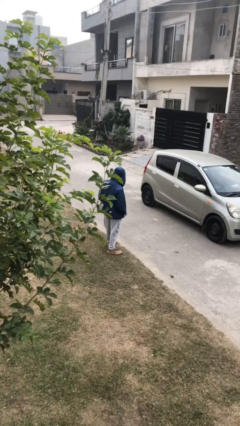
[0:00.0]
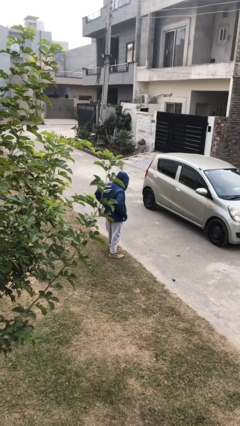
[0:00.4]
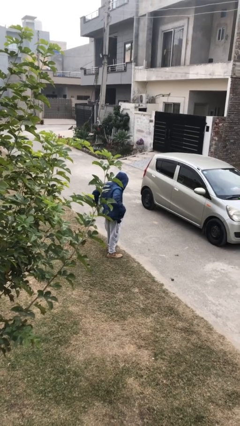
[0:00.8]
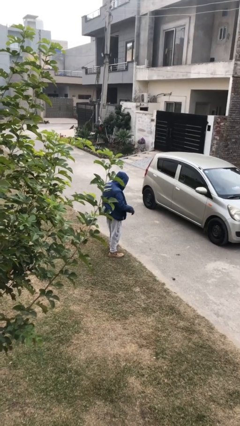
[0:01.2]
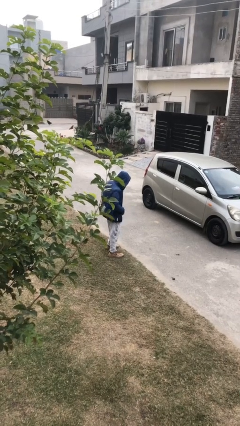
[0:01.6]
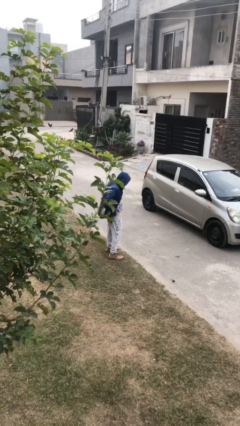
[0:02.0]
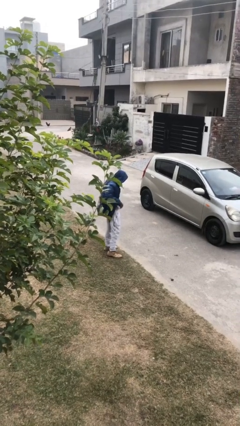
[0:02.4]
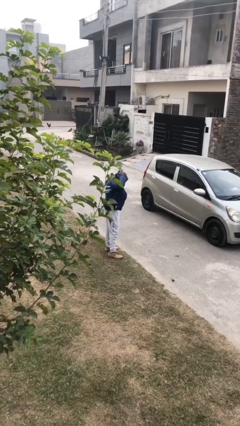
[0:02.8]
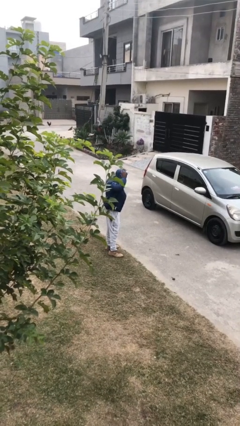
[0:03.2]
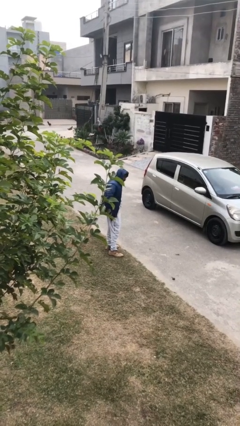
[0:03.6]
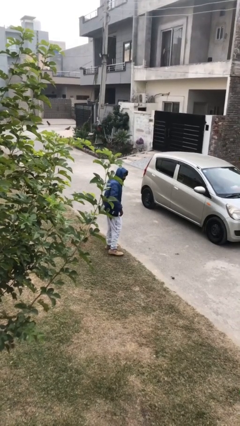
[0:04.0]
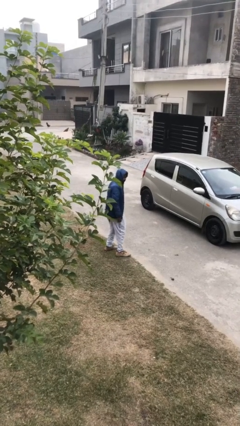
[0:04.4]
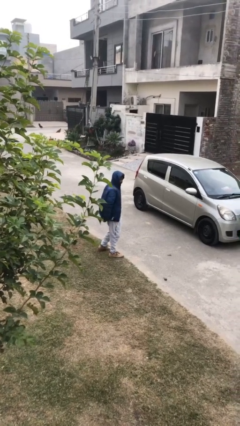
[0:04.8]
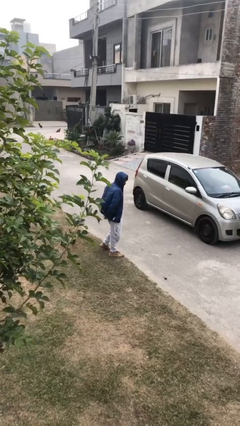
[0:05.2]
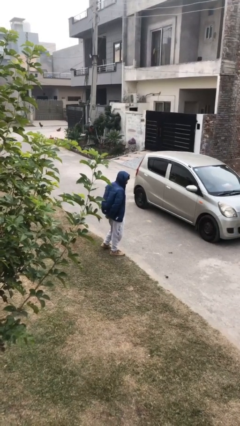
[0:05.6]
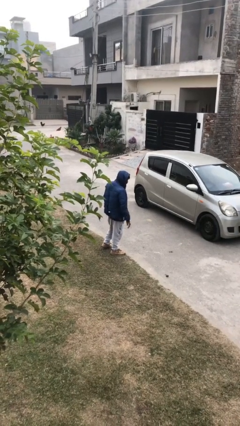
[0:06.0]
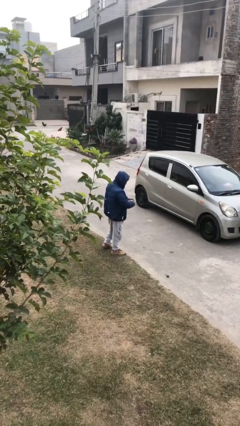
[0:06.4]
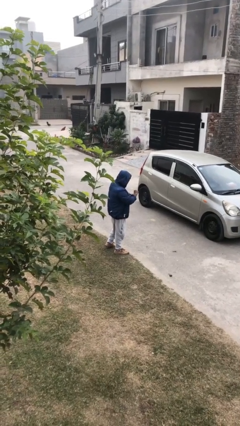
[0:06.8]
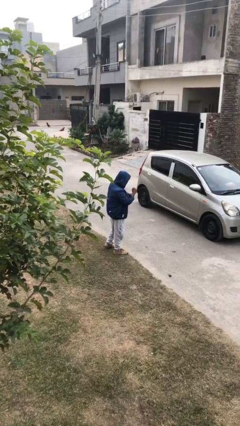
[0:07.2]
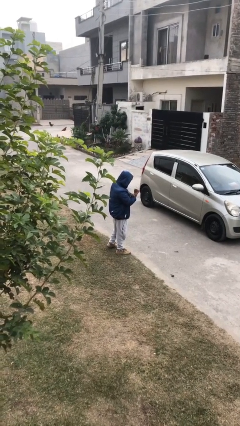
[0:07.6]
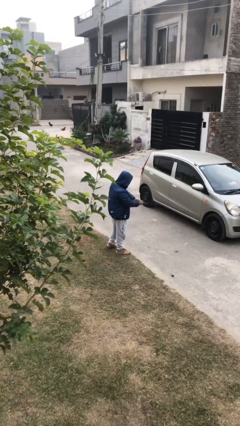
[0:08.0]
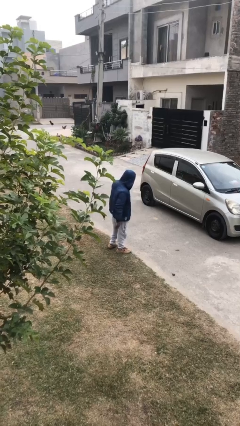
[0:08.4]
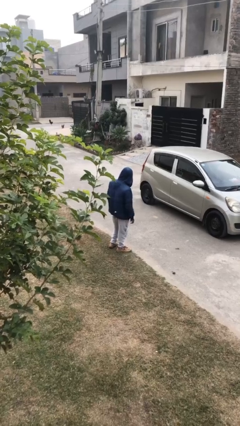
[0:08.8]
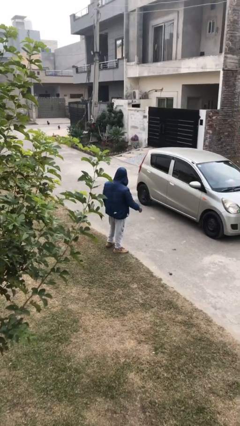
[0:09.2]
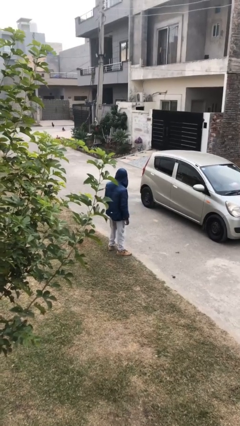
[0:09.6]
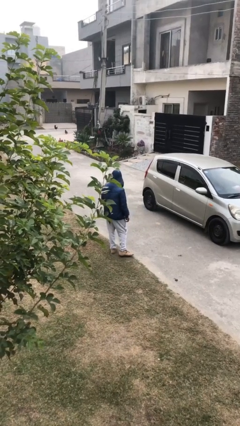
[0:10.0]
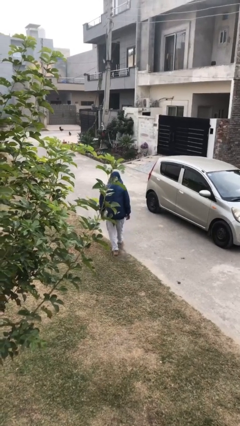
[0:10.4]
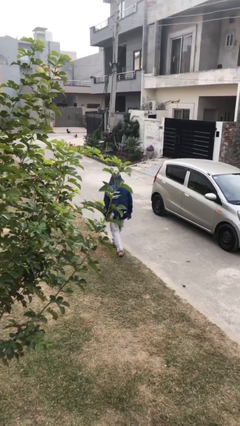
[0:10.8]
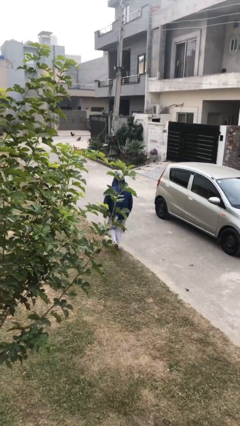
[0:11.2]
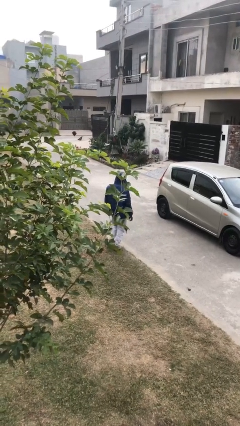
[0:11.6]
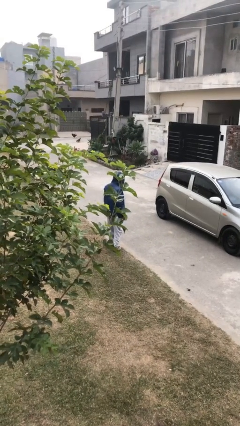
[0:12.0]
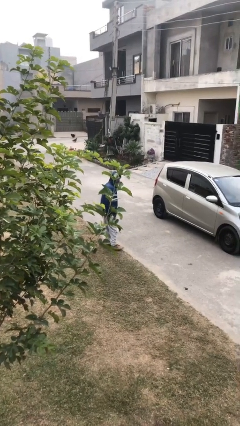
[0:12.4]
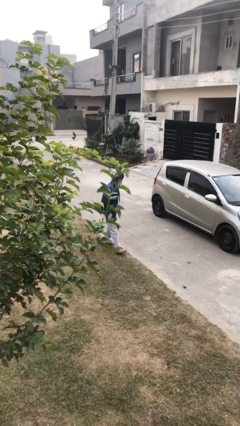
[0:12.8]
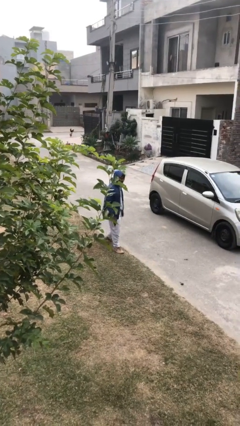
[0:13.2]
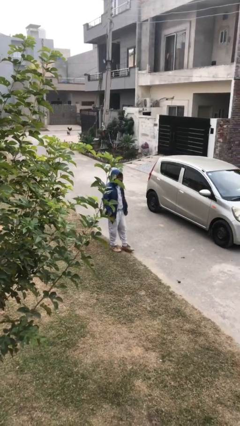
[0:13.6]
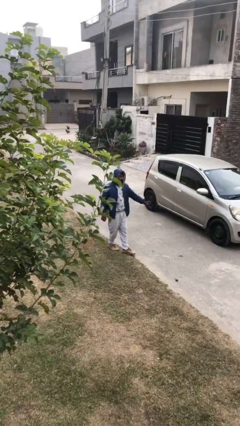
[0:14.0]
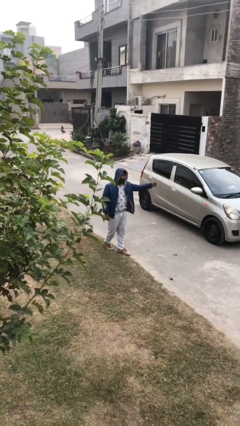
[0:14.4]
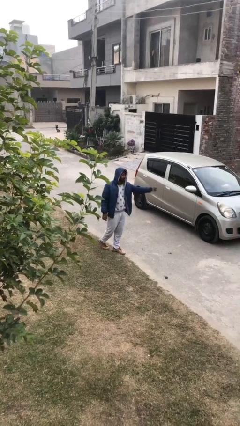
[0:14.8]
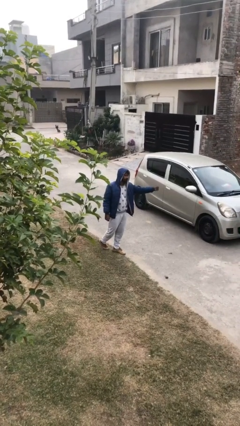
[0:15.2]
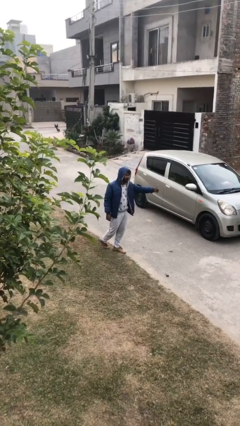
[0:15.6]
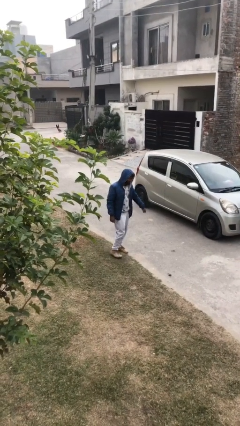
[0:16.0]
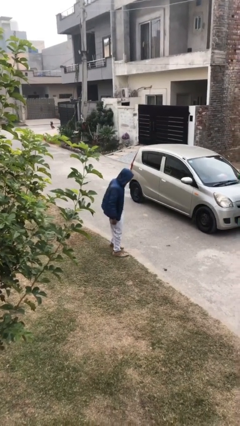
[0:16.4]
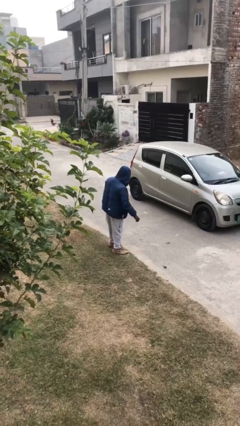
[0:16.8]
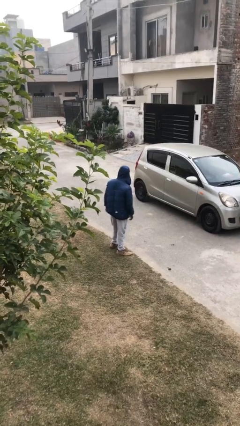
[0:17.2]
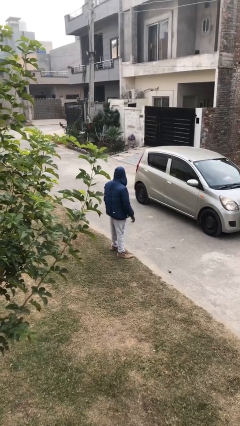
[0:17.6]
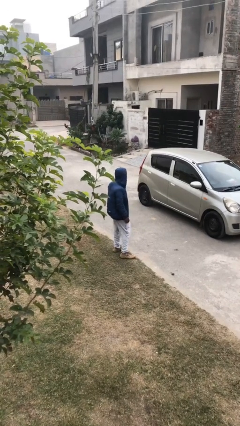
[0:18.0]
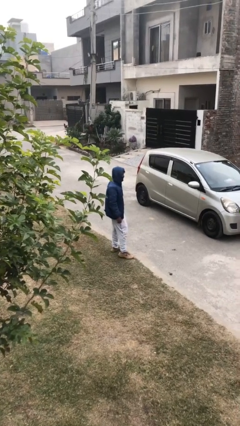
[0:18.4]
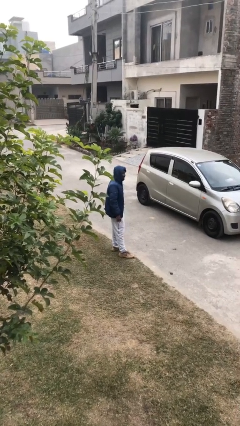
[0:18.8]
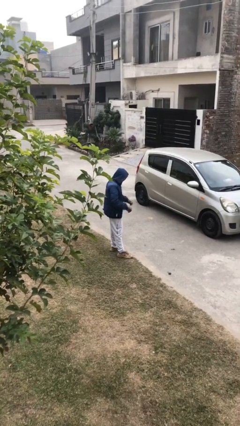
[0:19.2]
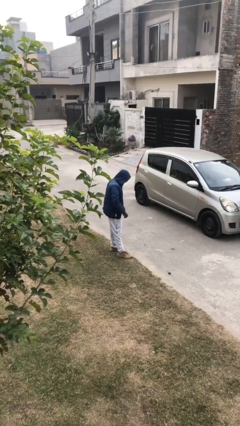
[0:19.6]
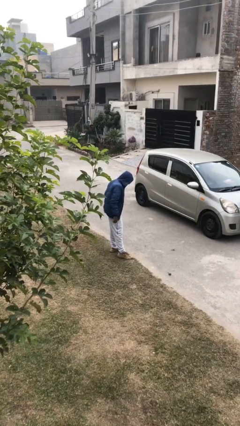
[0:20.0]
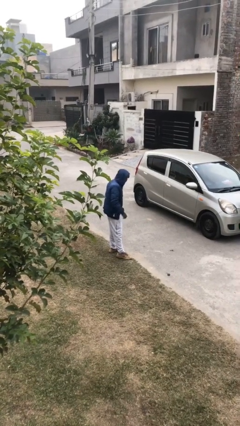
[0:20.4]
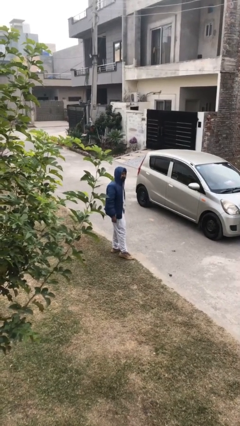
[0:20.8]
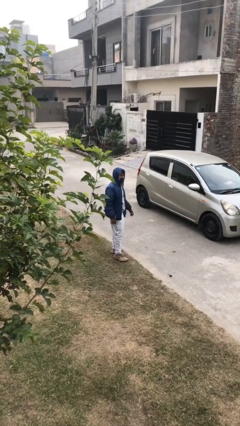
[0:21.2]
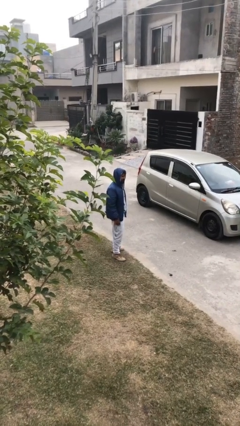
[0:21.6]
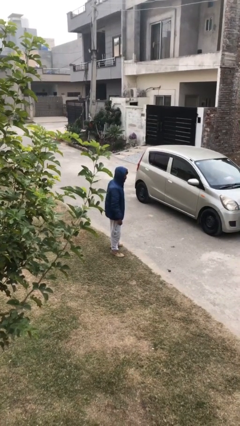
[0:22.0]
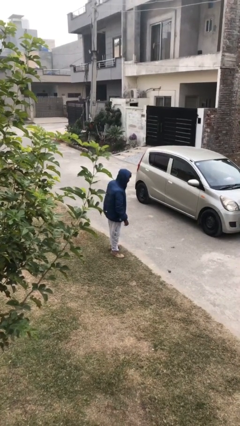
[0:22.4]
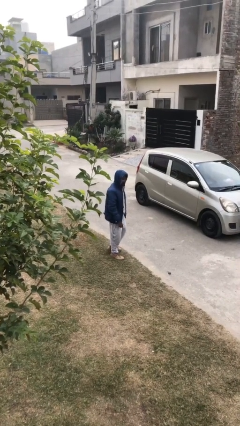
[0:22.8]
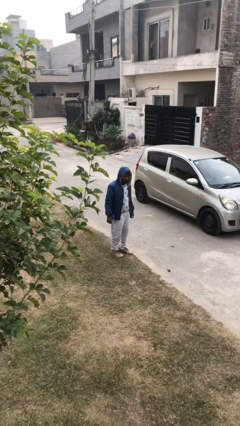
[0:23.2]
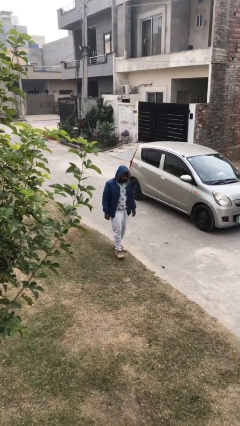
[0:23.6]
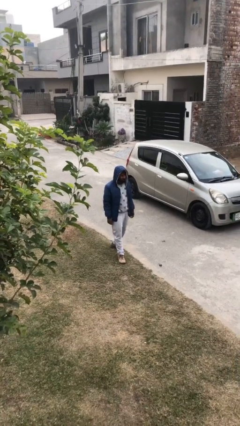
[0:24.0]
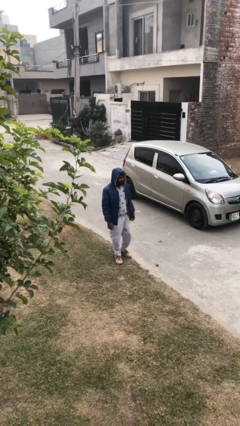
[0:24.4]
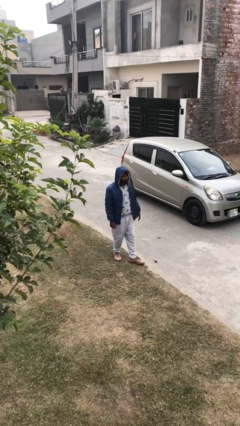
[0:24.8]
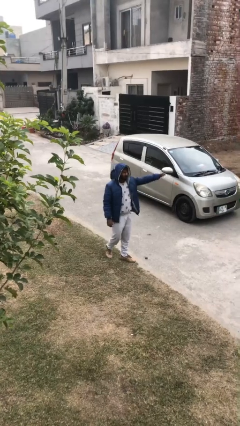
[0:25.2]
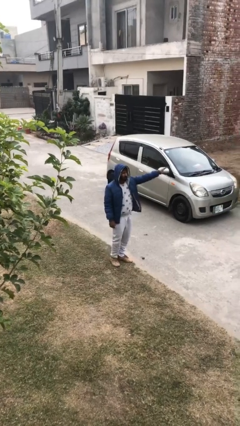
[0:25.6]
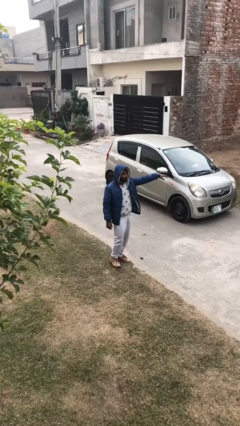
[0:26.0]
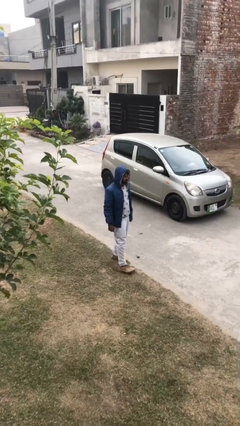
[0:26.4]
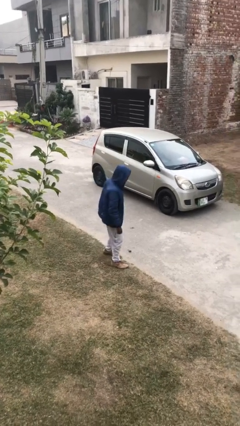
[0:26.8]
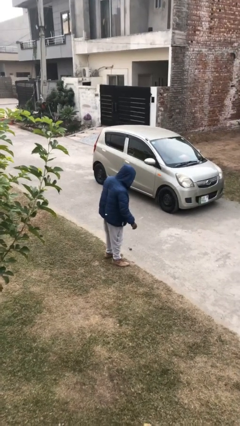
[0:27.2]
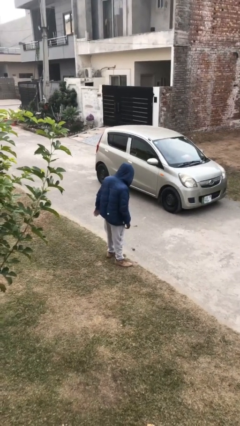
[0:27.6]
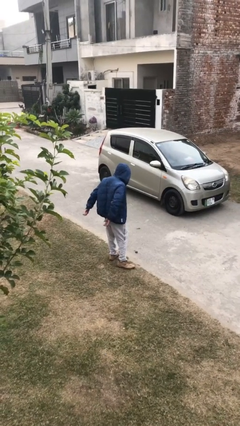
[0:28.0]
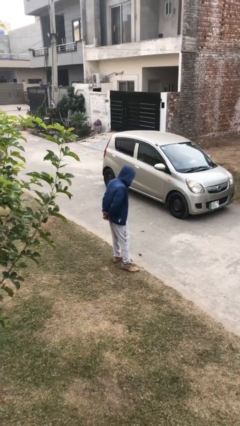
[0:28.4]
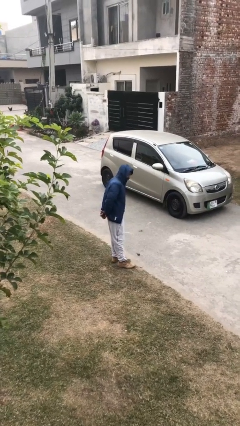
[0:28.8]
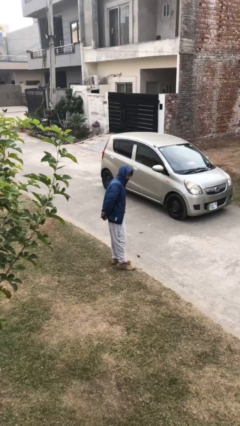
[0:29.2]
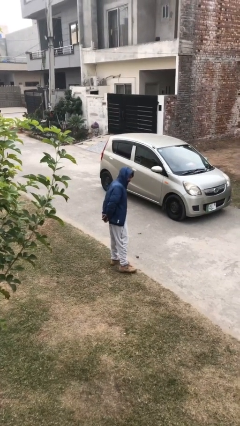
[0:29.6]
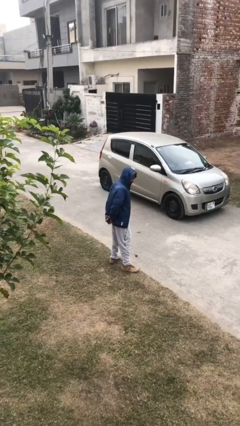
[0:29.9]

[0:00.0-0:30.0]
person walks

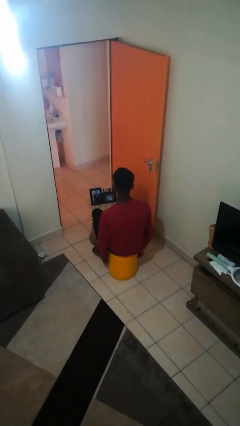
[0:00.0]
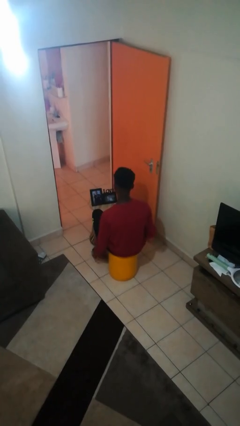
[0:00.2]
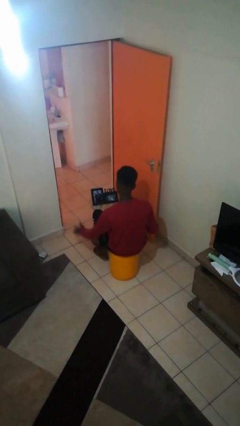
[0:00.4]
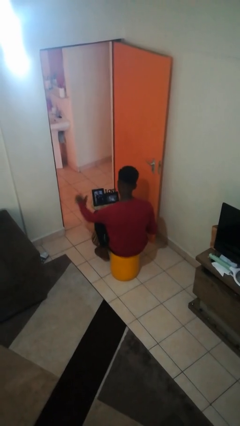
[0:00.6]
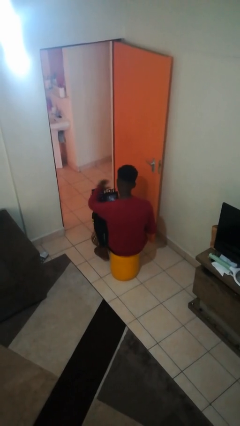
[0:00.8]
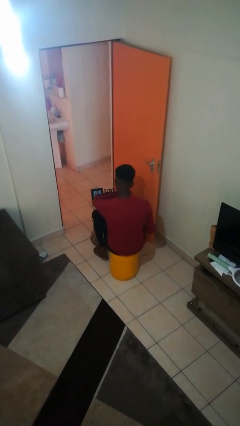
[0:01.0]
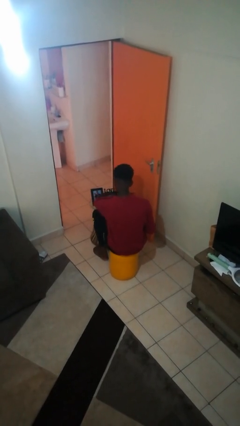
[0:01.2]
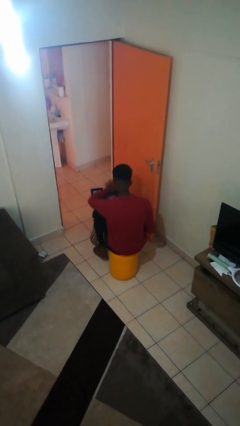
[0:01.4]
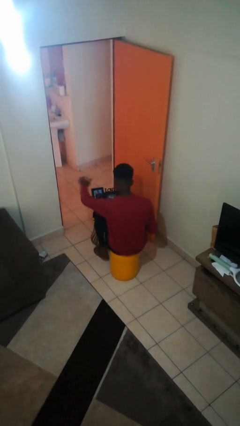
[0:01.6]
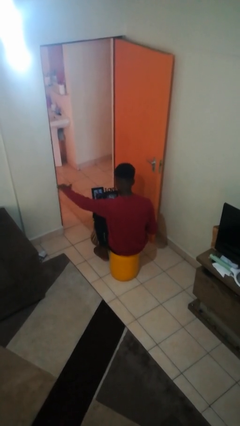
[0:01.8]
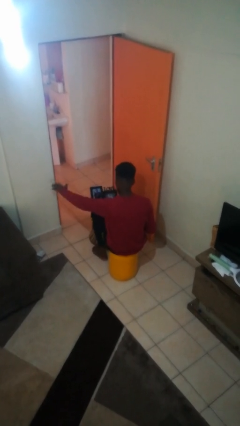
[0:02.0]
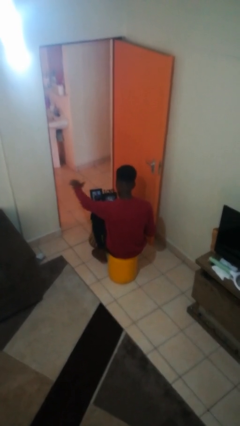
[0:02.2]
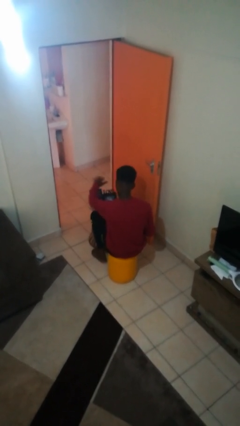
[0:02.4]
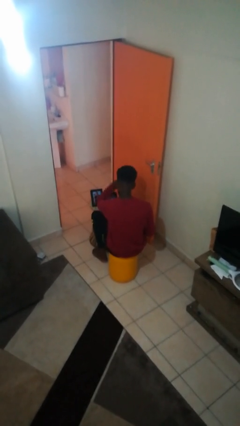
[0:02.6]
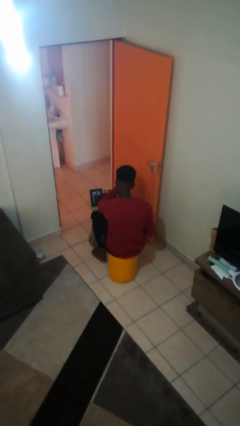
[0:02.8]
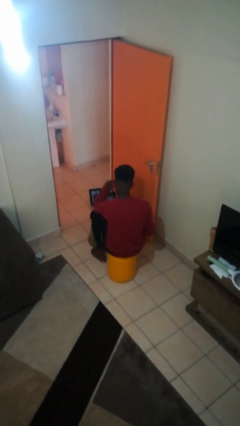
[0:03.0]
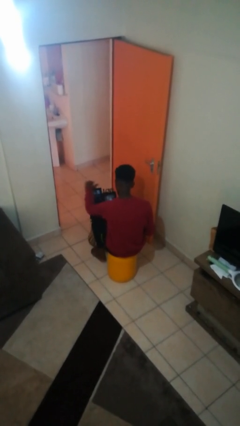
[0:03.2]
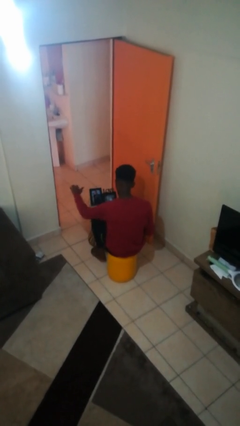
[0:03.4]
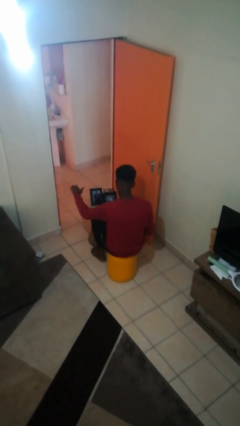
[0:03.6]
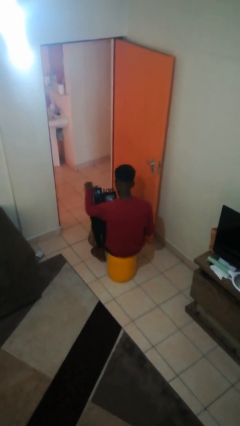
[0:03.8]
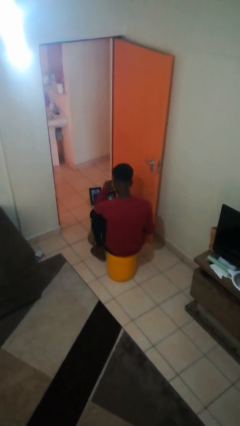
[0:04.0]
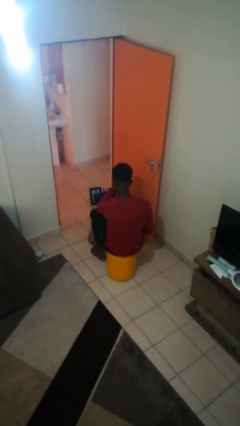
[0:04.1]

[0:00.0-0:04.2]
person waves hand over object
